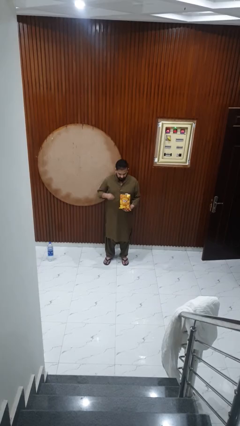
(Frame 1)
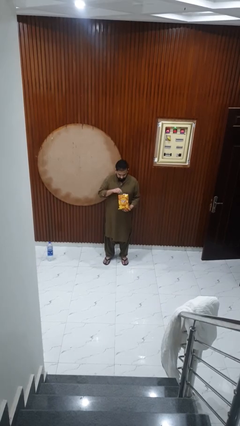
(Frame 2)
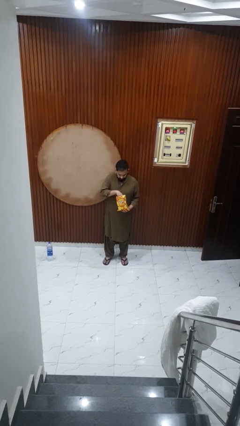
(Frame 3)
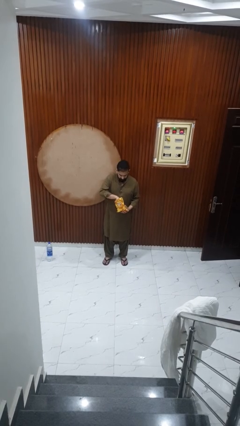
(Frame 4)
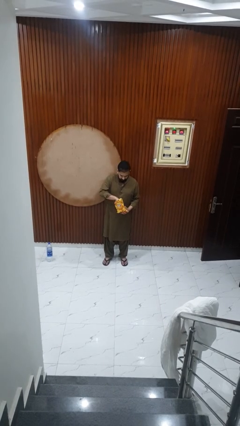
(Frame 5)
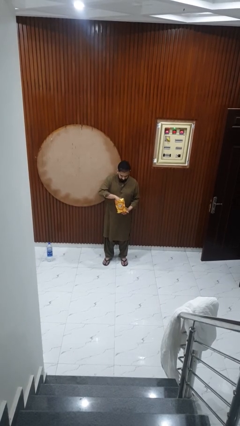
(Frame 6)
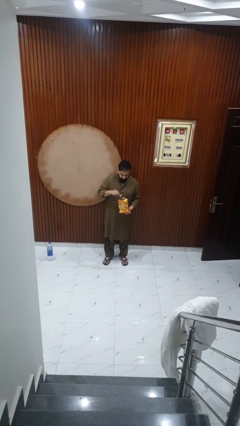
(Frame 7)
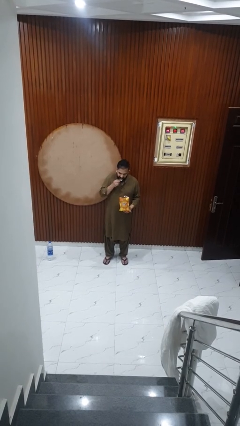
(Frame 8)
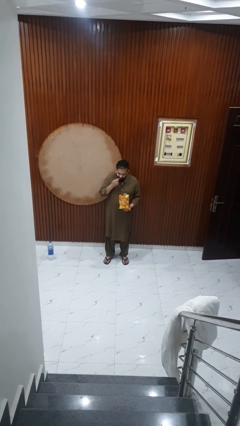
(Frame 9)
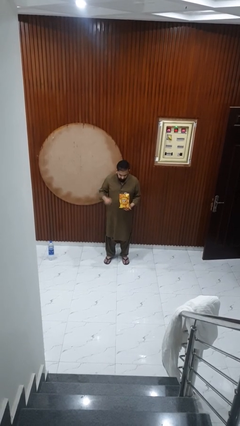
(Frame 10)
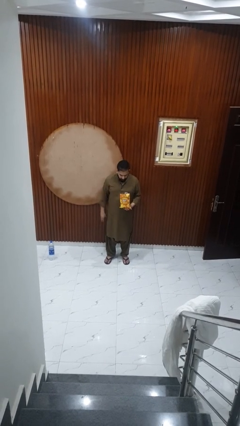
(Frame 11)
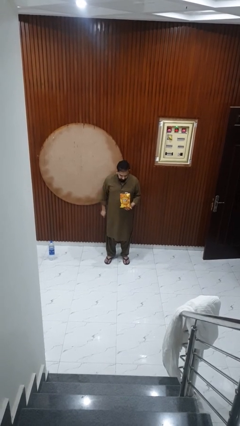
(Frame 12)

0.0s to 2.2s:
person eats snack from bag

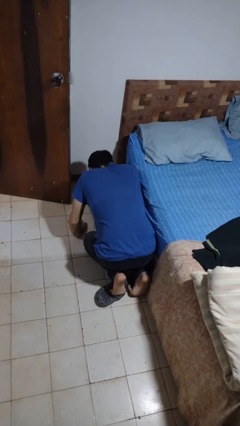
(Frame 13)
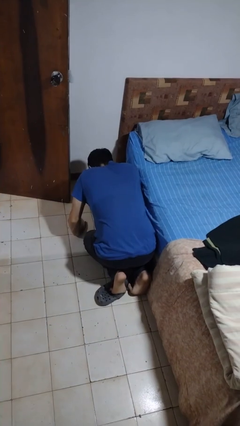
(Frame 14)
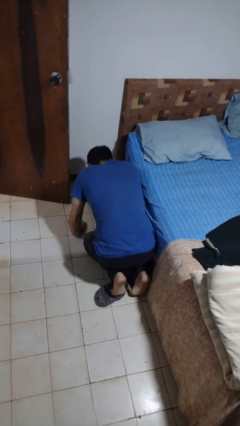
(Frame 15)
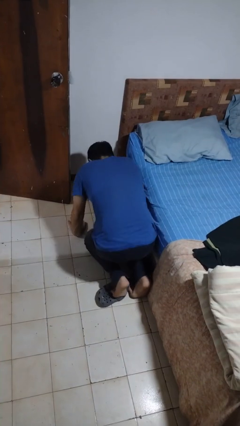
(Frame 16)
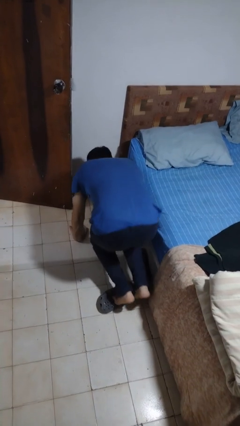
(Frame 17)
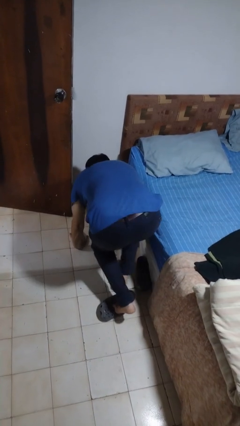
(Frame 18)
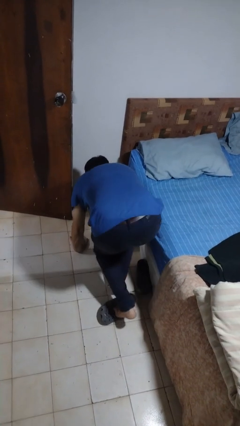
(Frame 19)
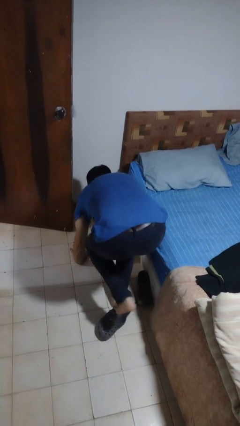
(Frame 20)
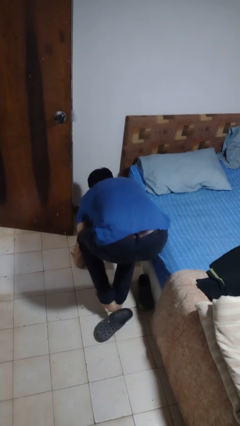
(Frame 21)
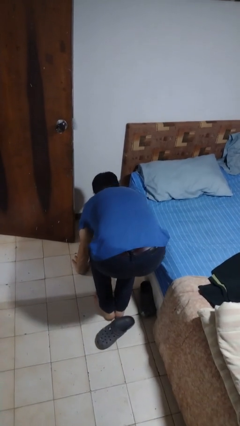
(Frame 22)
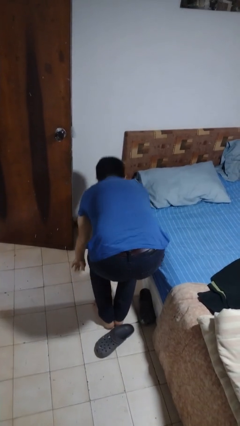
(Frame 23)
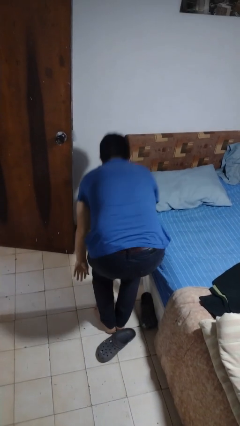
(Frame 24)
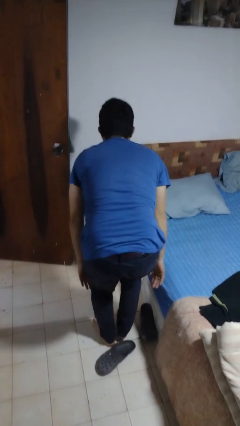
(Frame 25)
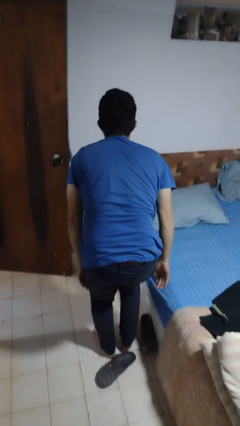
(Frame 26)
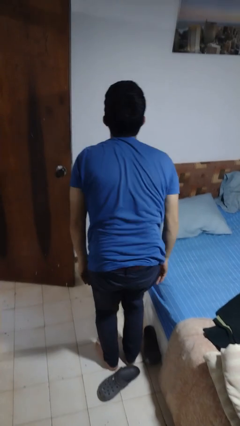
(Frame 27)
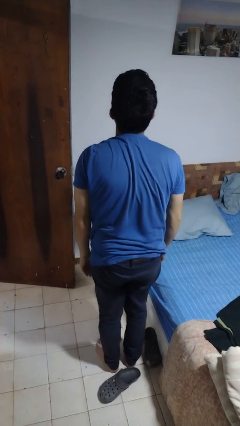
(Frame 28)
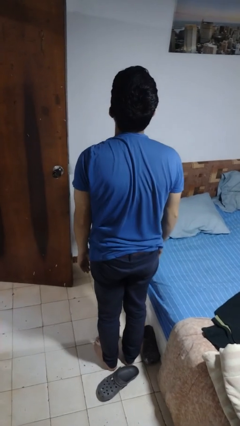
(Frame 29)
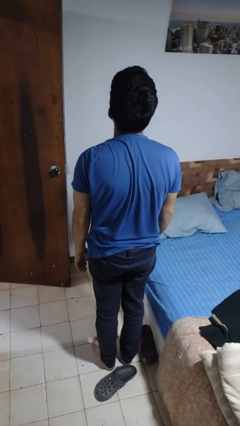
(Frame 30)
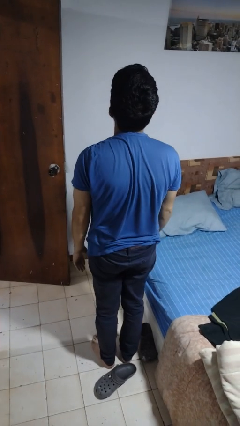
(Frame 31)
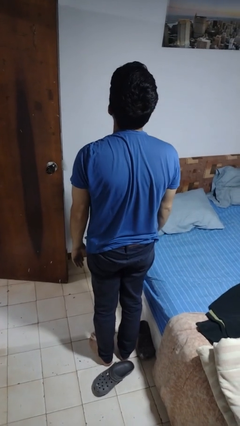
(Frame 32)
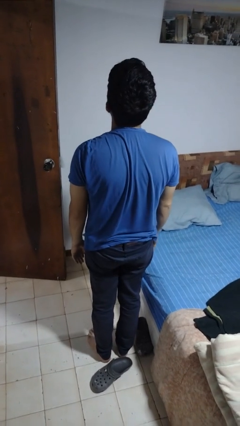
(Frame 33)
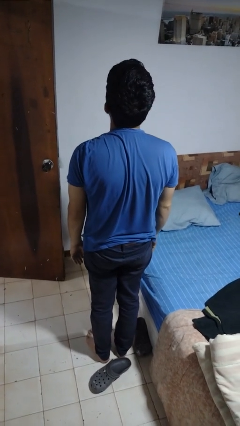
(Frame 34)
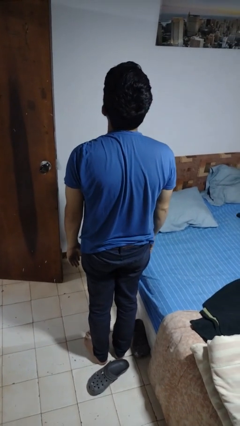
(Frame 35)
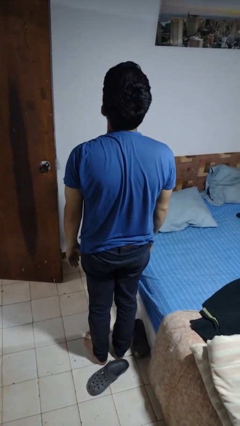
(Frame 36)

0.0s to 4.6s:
person stands up from floor

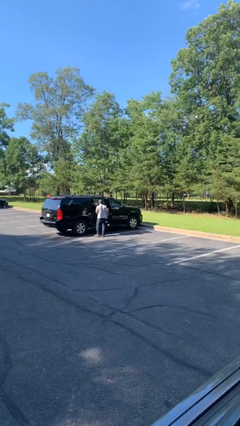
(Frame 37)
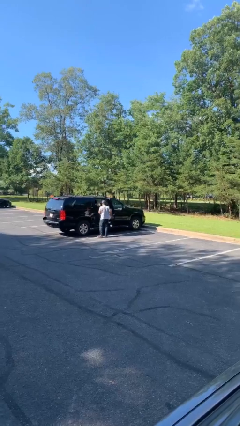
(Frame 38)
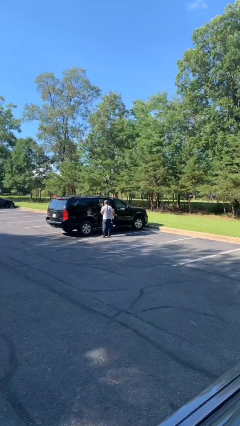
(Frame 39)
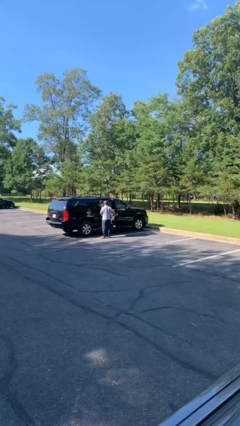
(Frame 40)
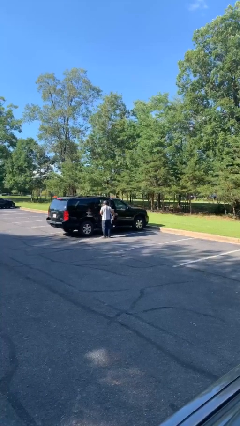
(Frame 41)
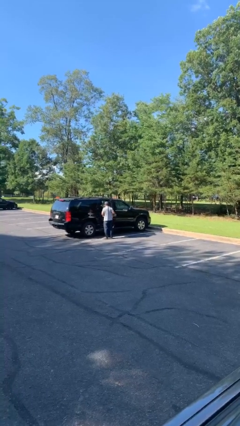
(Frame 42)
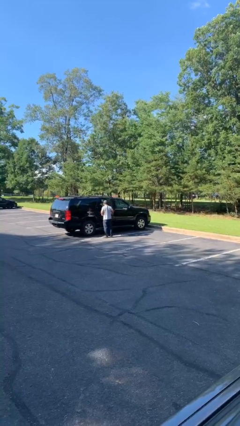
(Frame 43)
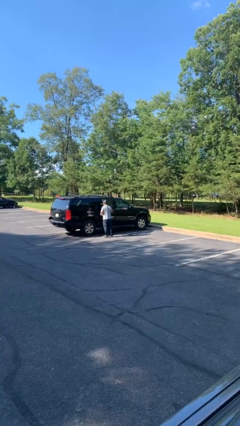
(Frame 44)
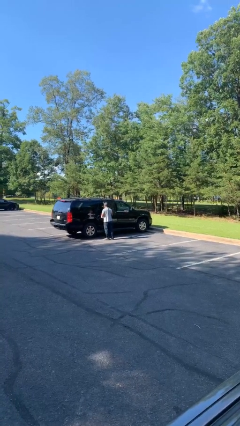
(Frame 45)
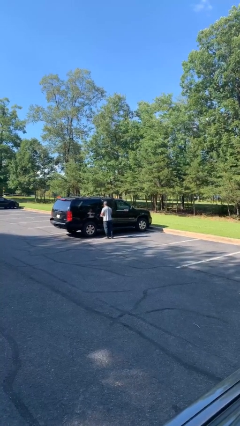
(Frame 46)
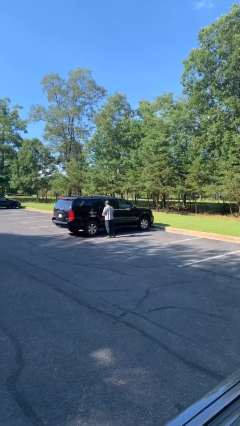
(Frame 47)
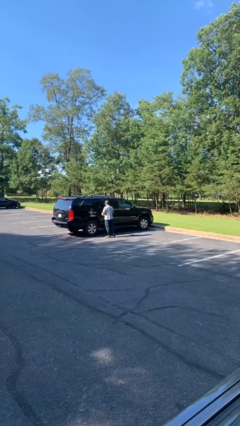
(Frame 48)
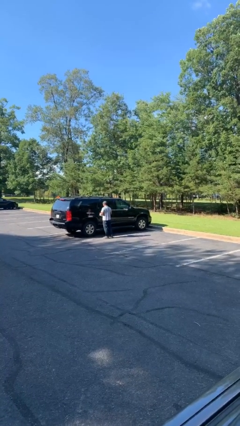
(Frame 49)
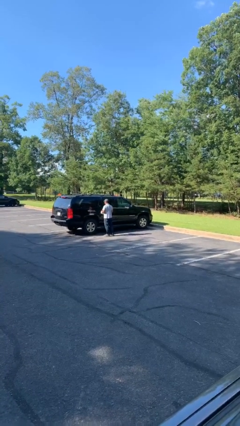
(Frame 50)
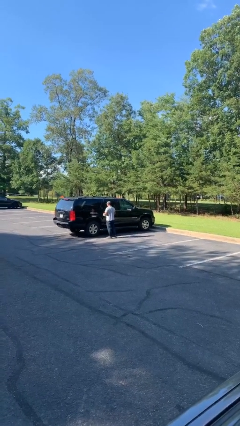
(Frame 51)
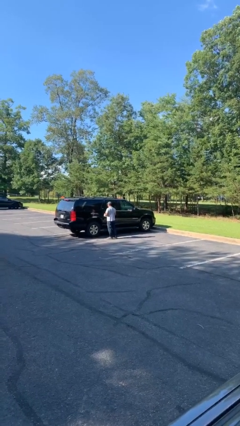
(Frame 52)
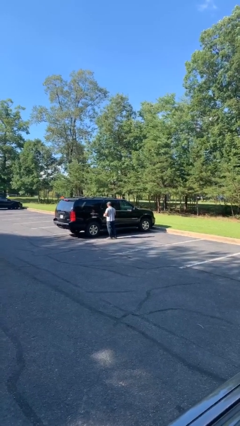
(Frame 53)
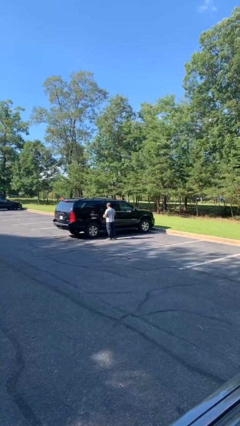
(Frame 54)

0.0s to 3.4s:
person closes car door

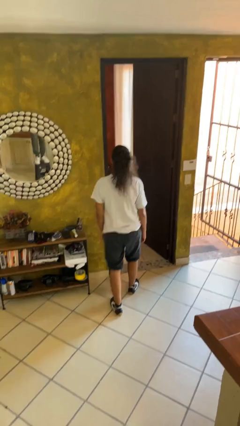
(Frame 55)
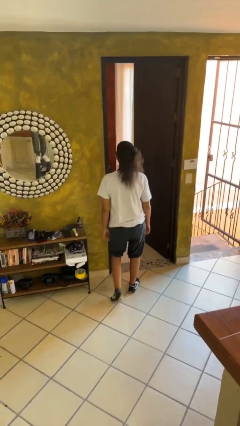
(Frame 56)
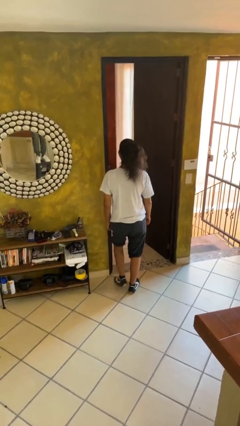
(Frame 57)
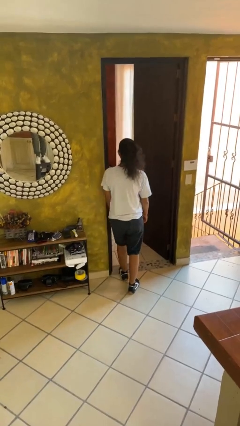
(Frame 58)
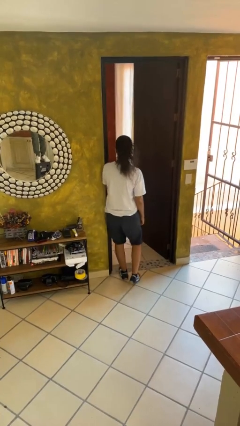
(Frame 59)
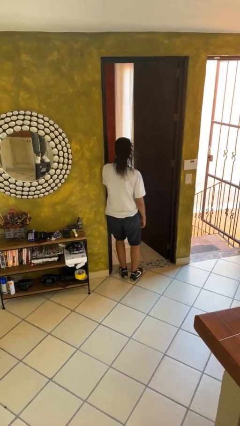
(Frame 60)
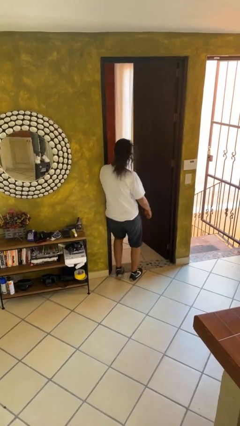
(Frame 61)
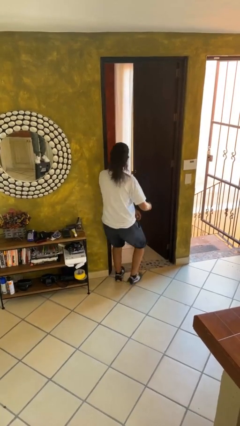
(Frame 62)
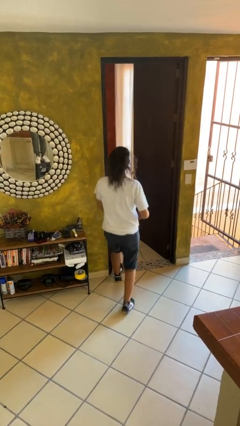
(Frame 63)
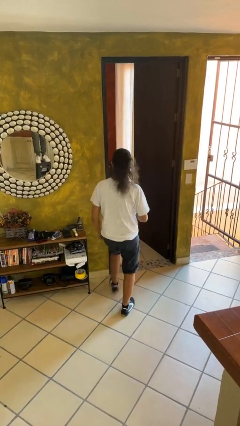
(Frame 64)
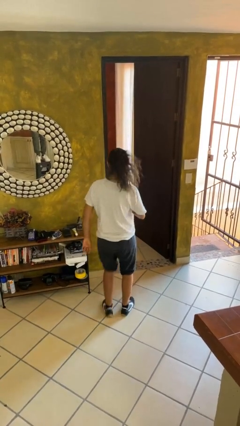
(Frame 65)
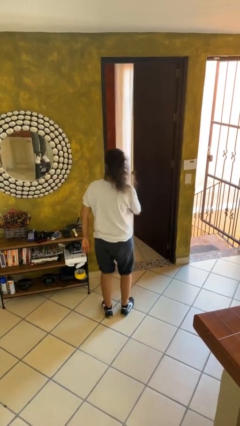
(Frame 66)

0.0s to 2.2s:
person bumps into wall

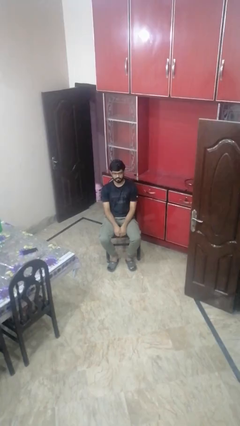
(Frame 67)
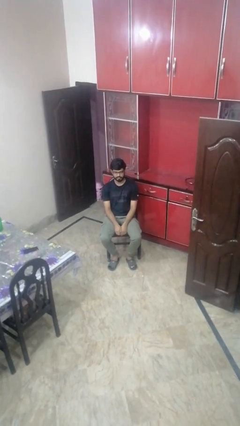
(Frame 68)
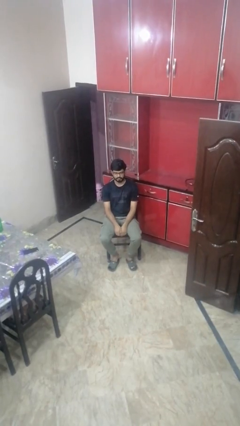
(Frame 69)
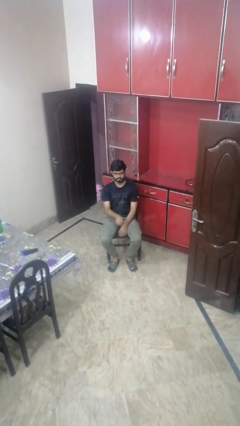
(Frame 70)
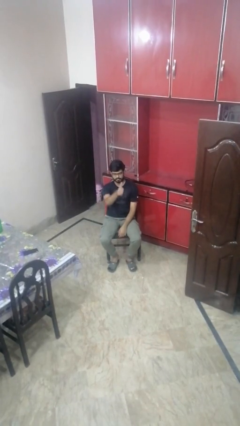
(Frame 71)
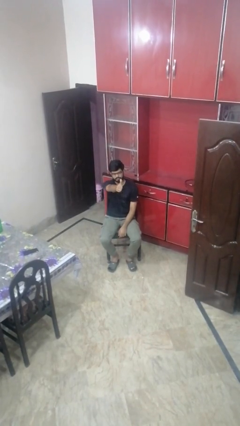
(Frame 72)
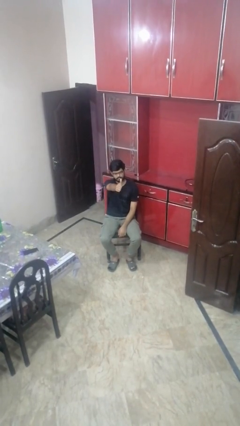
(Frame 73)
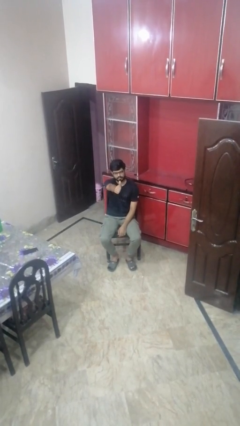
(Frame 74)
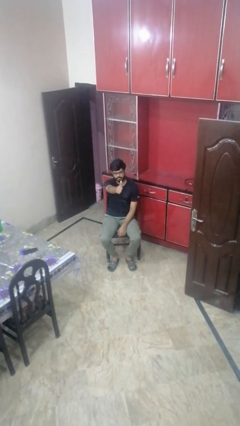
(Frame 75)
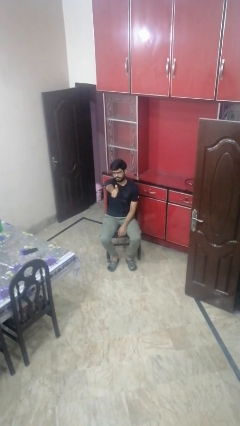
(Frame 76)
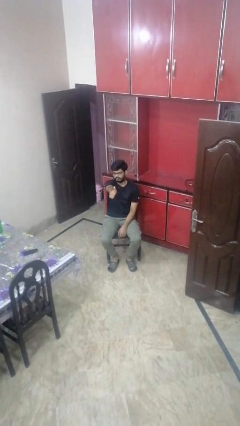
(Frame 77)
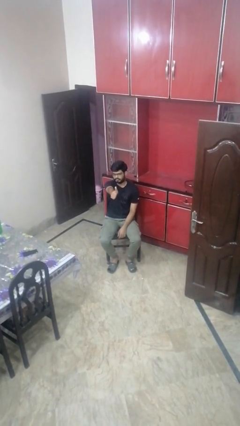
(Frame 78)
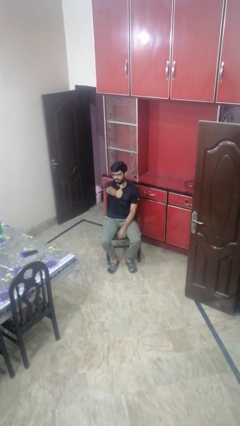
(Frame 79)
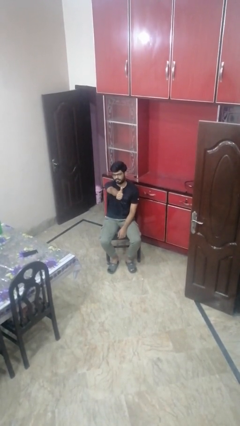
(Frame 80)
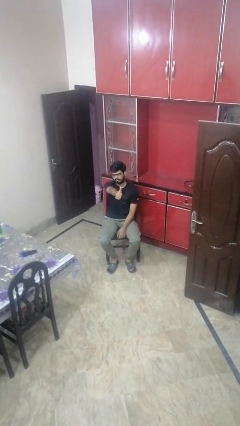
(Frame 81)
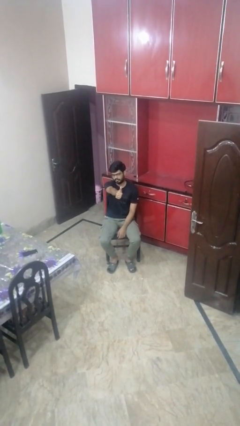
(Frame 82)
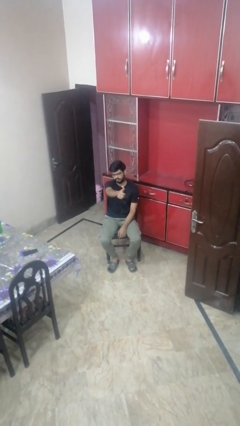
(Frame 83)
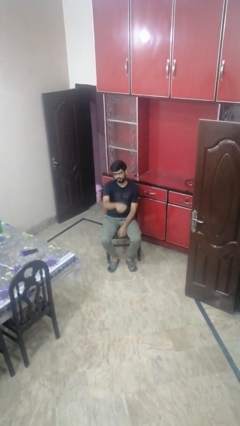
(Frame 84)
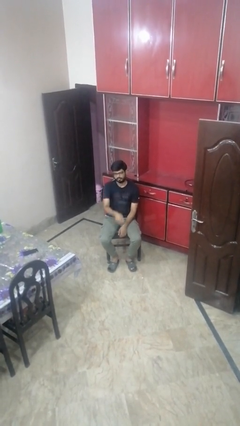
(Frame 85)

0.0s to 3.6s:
person gestures thumbs up

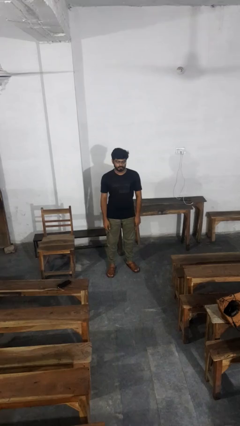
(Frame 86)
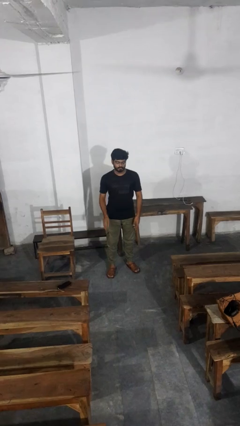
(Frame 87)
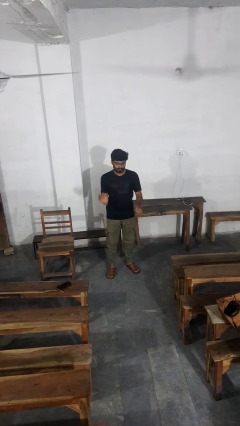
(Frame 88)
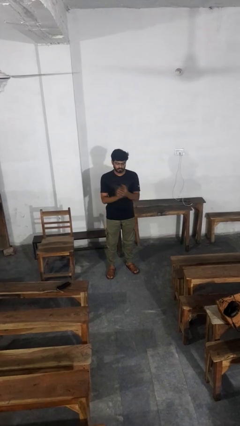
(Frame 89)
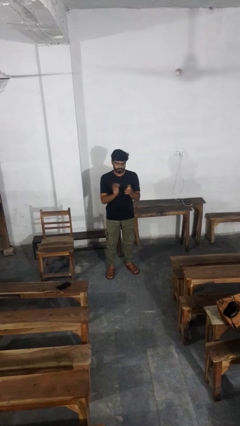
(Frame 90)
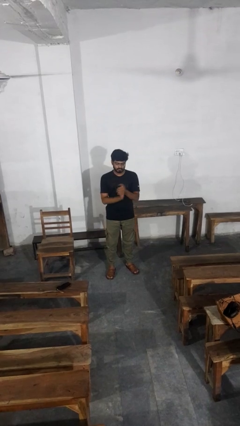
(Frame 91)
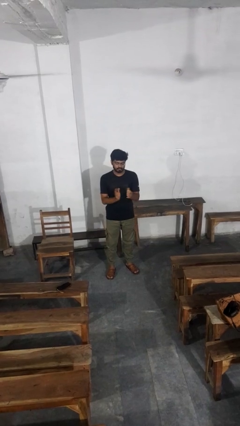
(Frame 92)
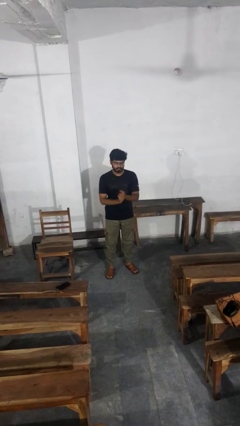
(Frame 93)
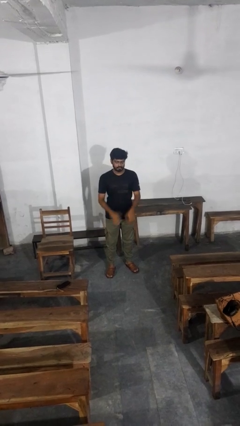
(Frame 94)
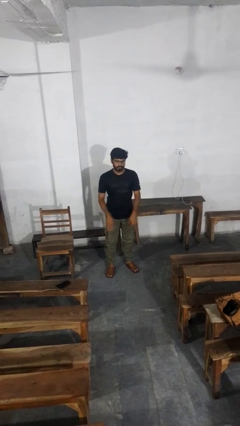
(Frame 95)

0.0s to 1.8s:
person claps hands
